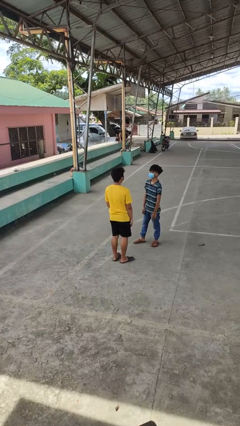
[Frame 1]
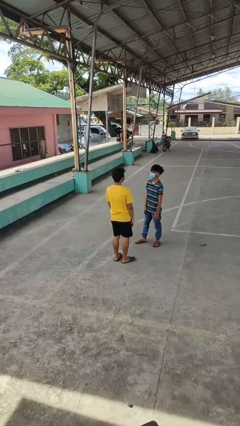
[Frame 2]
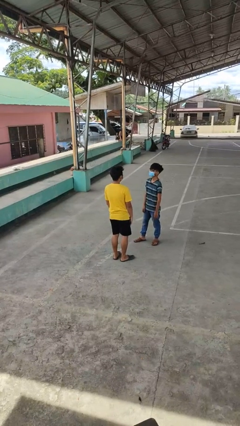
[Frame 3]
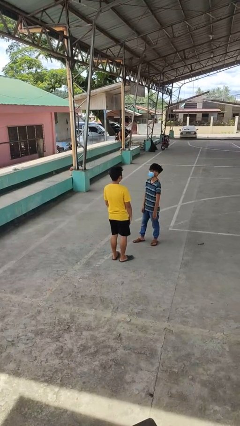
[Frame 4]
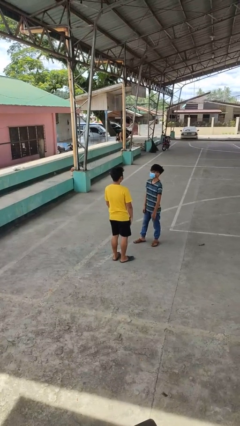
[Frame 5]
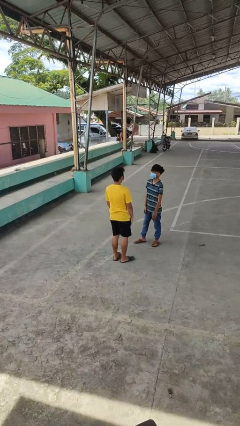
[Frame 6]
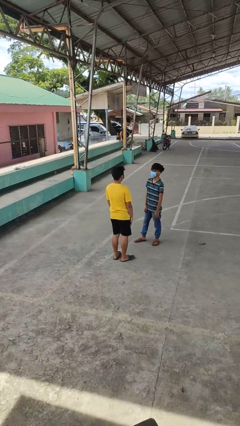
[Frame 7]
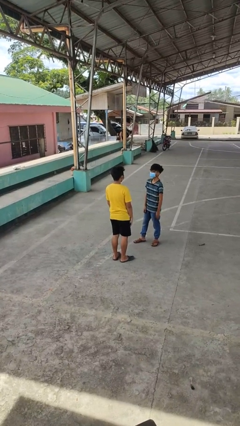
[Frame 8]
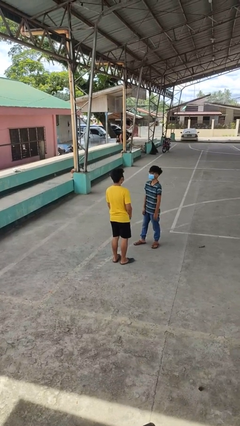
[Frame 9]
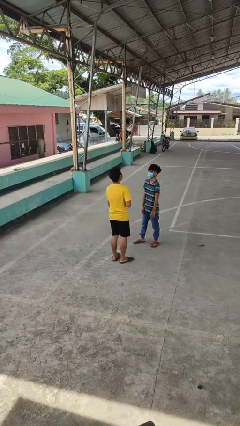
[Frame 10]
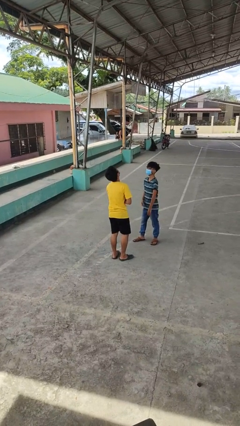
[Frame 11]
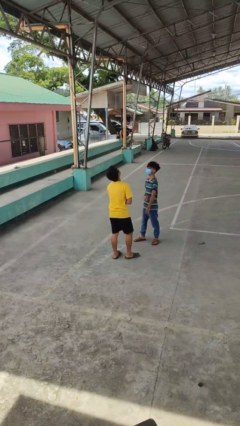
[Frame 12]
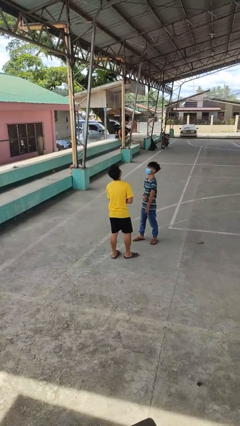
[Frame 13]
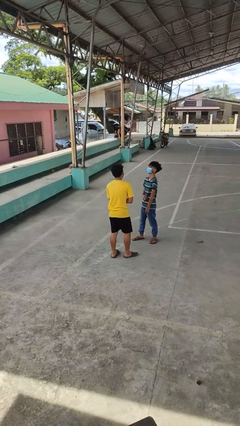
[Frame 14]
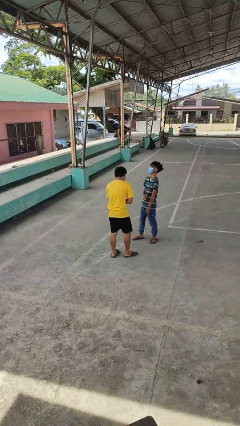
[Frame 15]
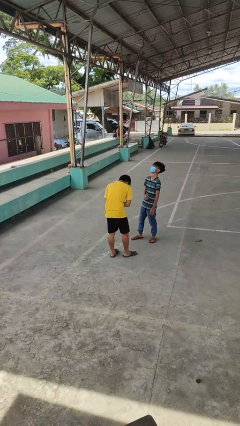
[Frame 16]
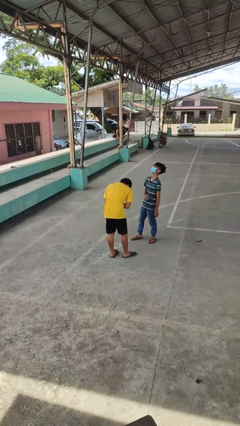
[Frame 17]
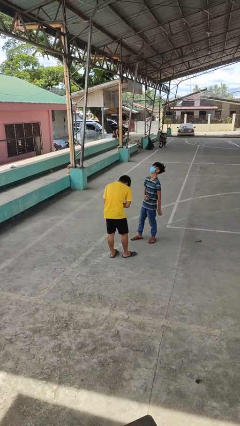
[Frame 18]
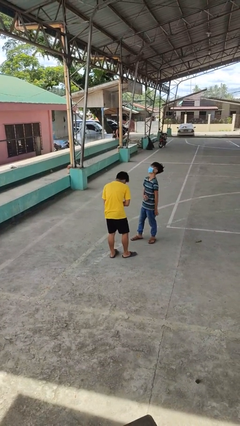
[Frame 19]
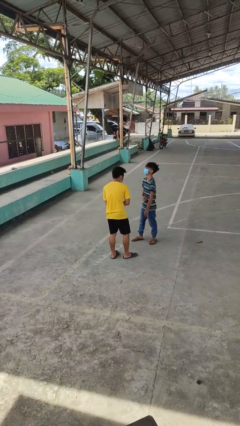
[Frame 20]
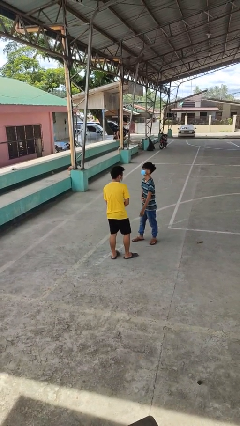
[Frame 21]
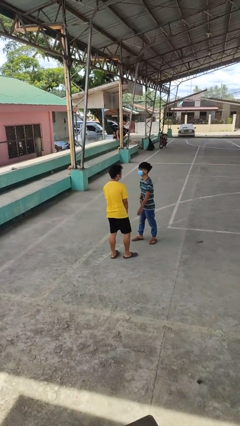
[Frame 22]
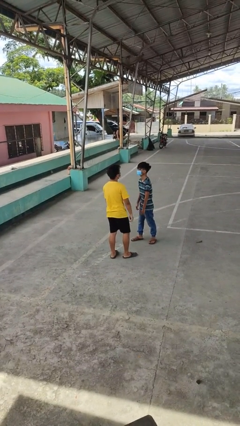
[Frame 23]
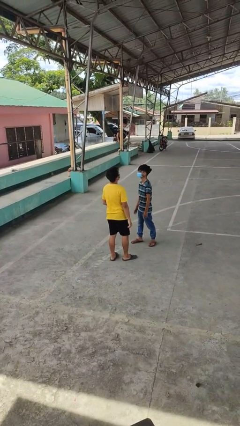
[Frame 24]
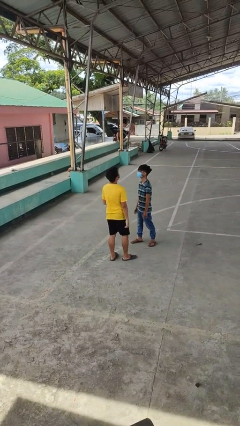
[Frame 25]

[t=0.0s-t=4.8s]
person laughs with person

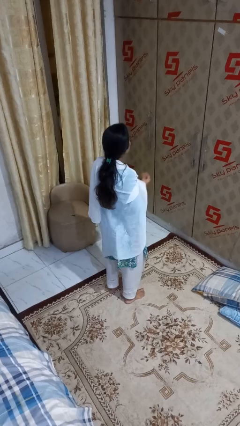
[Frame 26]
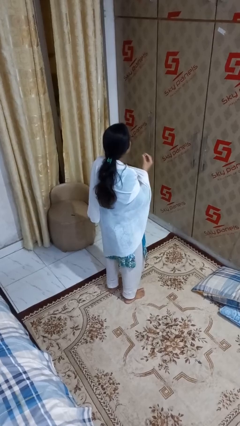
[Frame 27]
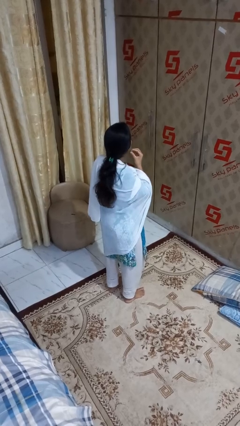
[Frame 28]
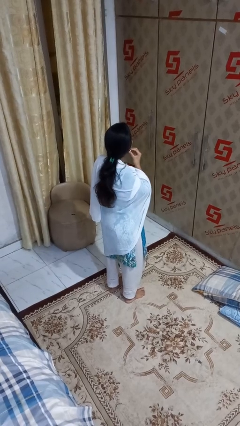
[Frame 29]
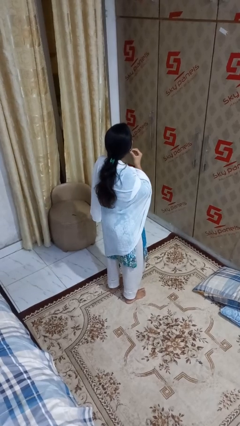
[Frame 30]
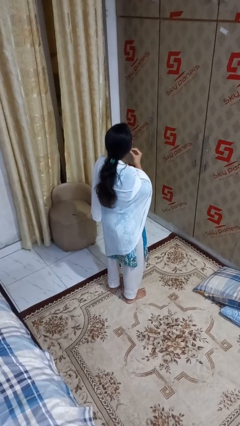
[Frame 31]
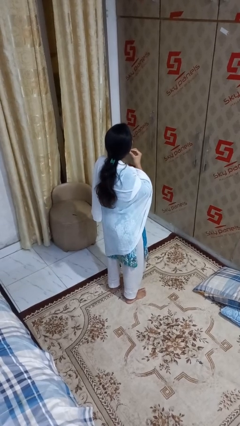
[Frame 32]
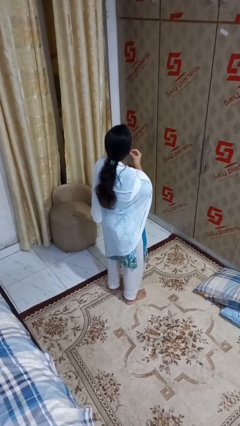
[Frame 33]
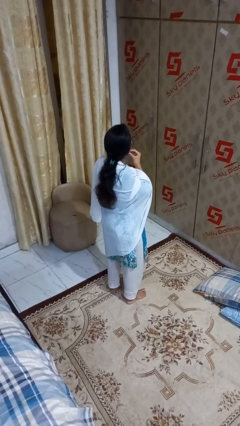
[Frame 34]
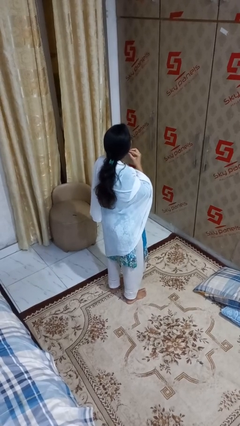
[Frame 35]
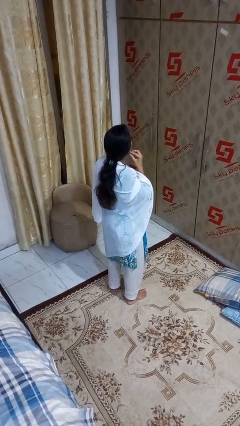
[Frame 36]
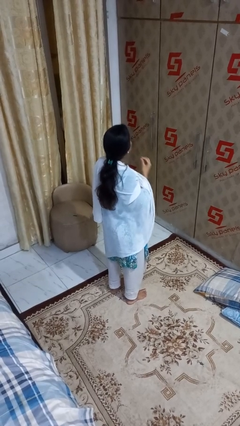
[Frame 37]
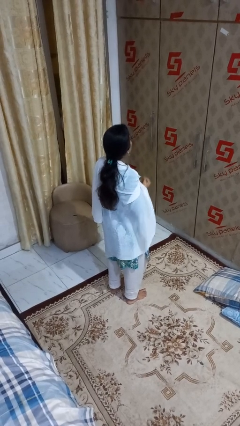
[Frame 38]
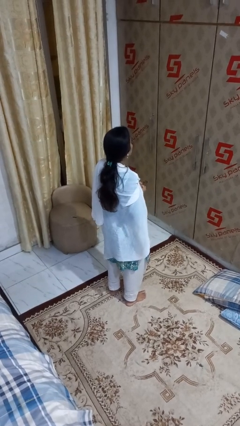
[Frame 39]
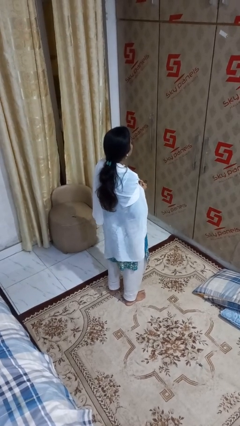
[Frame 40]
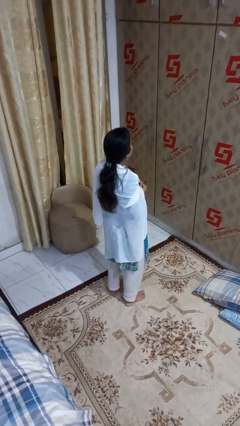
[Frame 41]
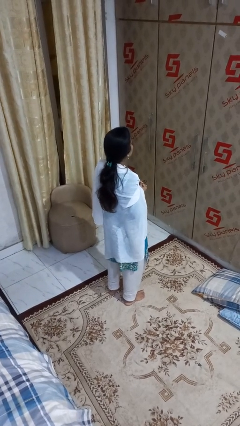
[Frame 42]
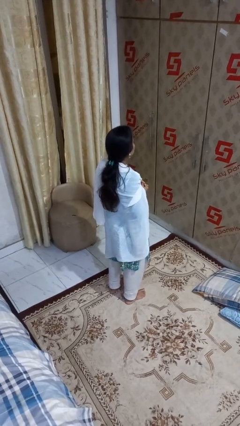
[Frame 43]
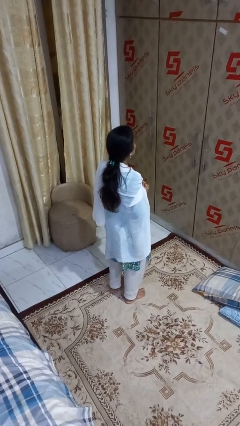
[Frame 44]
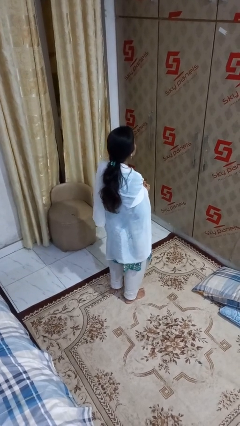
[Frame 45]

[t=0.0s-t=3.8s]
person puts on earrings

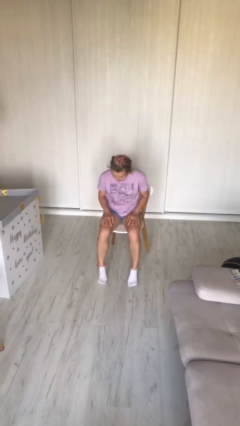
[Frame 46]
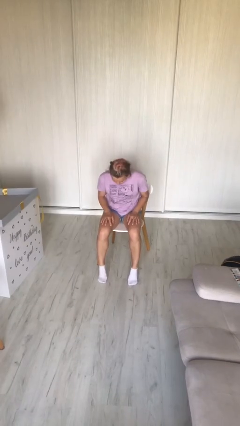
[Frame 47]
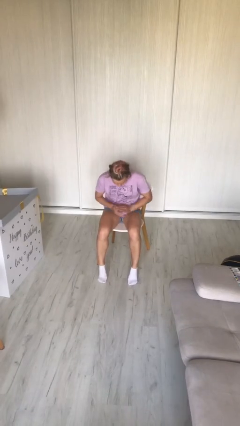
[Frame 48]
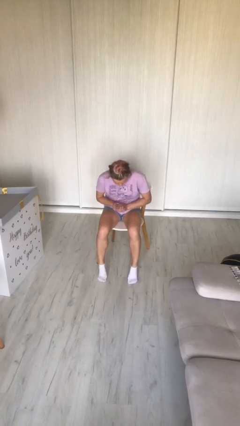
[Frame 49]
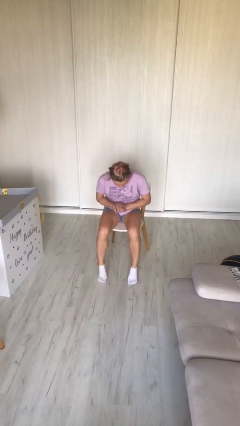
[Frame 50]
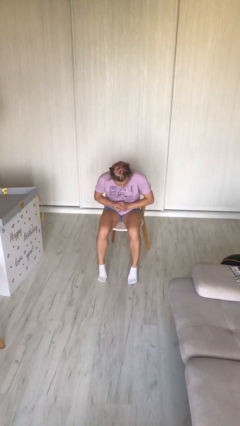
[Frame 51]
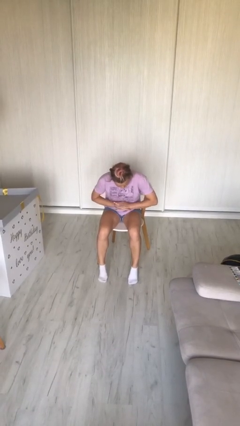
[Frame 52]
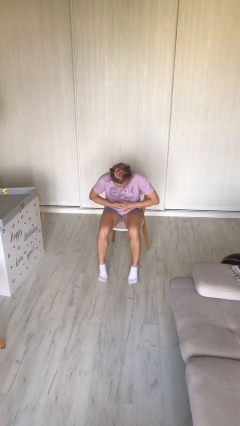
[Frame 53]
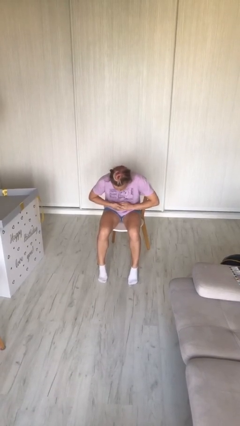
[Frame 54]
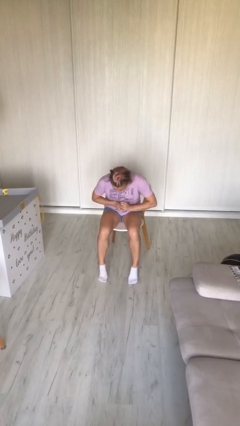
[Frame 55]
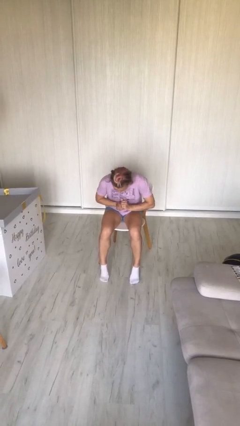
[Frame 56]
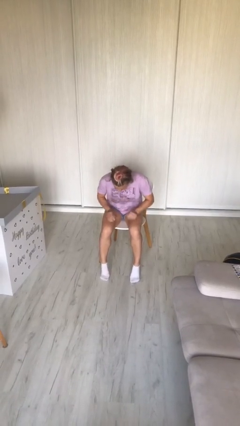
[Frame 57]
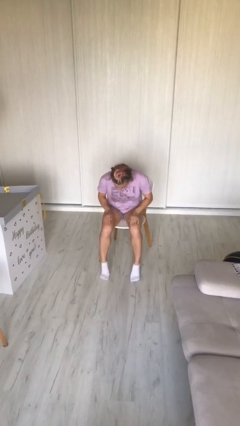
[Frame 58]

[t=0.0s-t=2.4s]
person looks at hands in lap

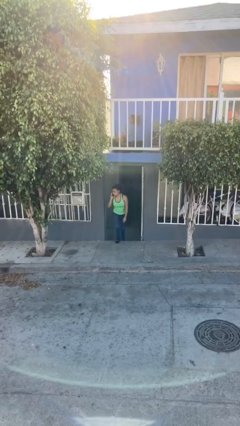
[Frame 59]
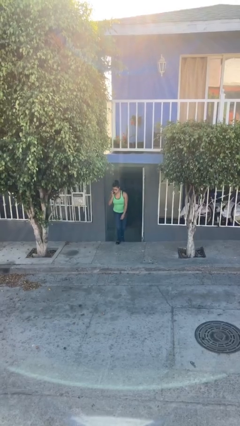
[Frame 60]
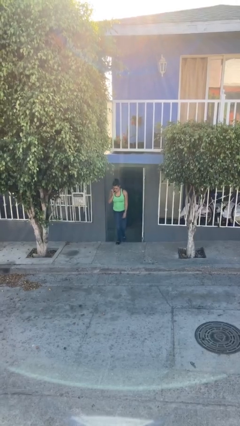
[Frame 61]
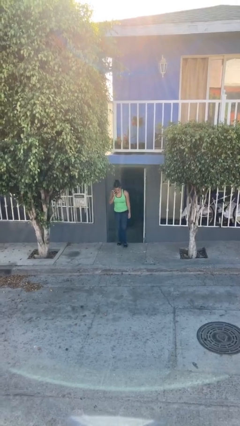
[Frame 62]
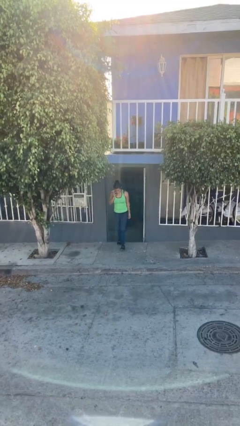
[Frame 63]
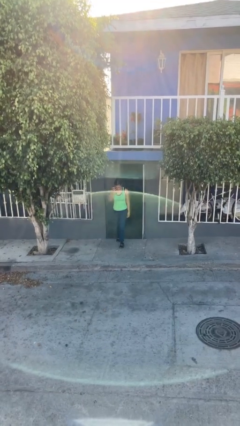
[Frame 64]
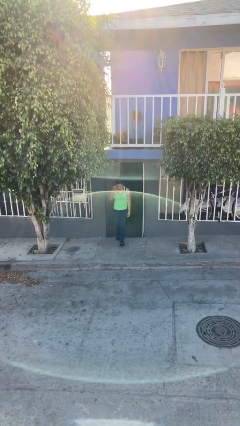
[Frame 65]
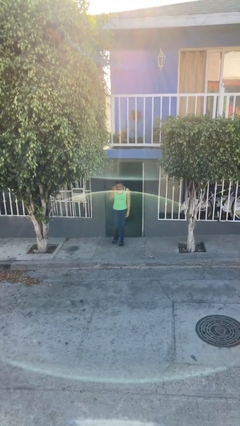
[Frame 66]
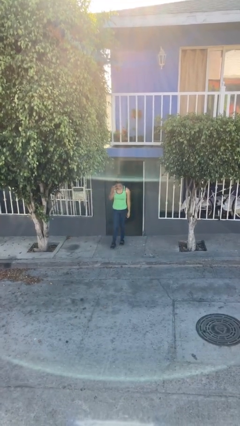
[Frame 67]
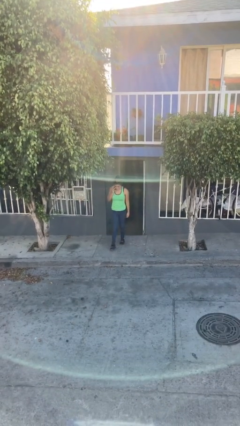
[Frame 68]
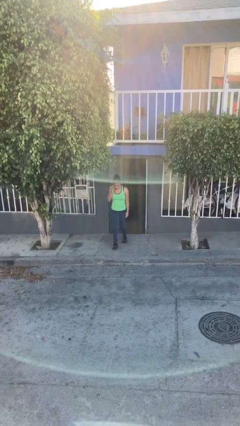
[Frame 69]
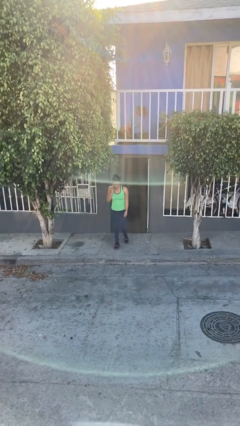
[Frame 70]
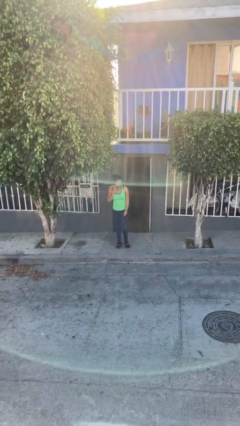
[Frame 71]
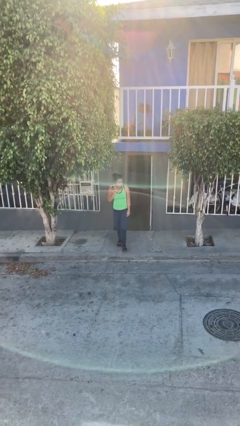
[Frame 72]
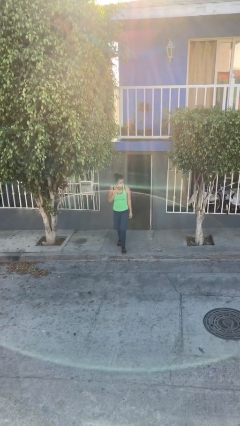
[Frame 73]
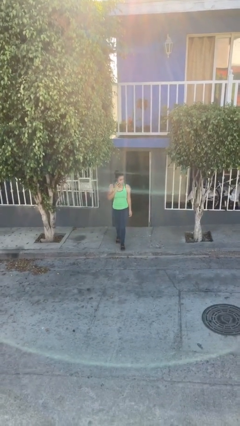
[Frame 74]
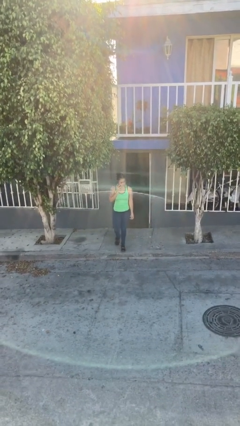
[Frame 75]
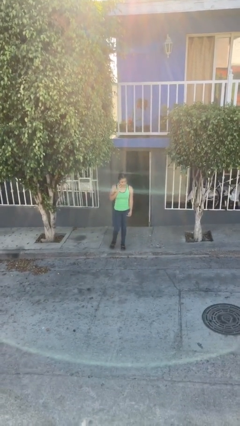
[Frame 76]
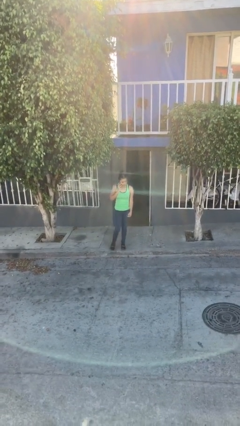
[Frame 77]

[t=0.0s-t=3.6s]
person enters scene through structure

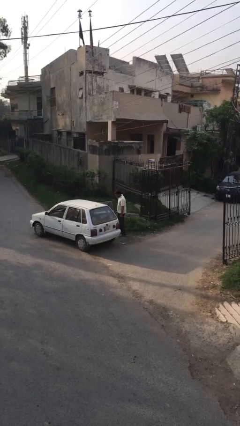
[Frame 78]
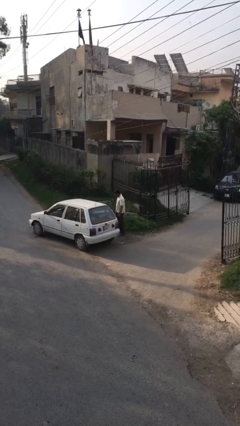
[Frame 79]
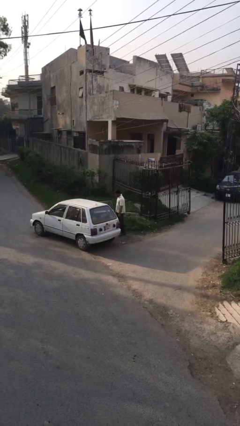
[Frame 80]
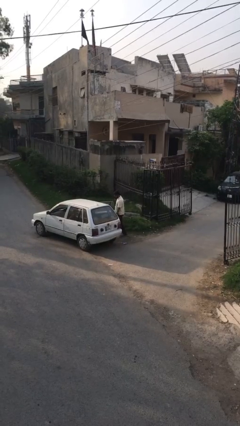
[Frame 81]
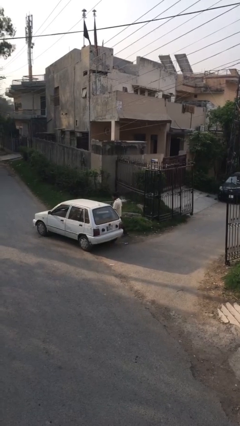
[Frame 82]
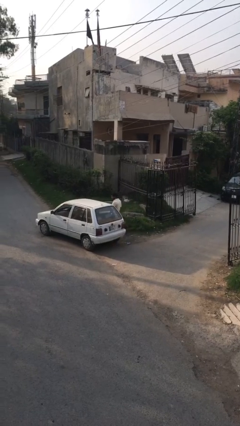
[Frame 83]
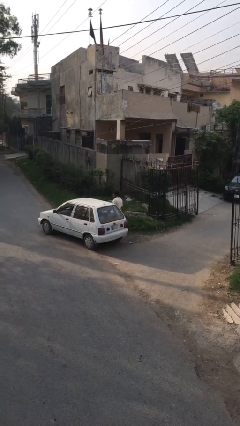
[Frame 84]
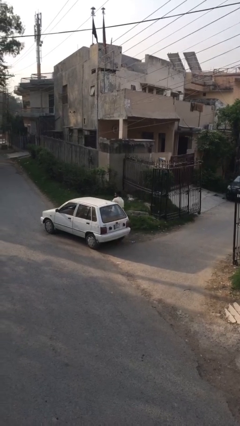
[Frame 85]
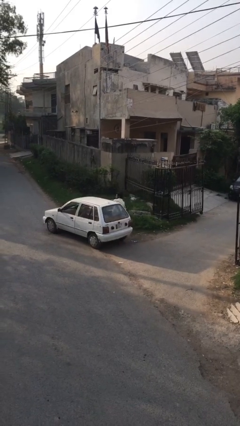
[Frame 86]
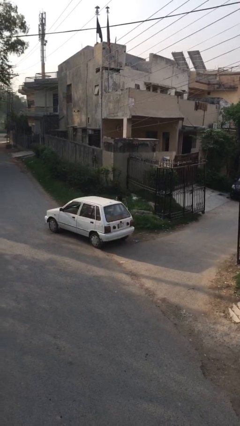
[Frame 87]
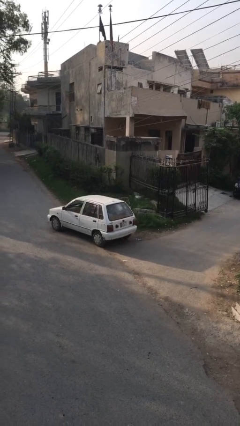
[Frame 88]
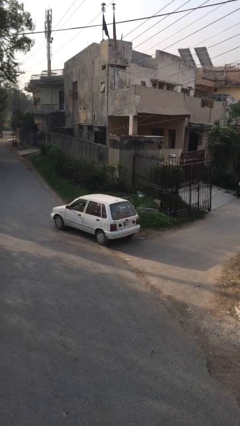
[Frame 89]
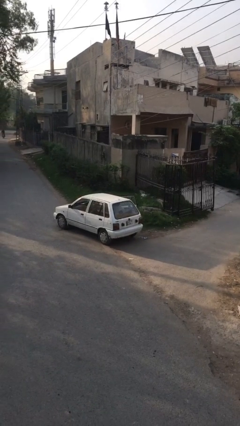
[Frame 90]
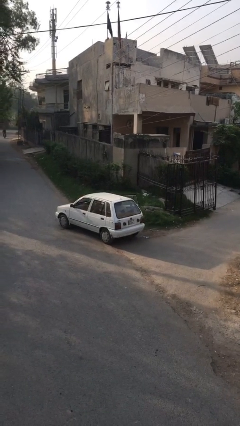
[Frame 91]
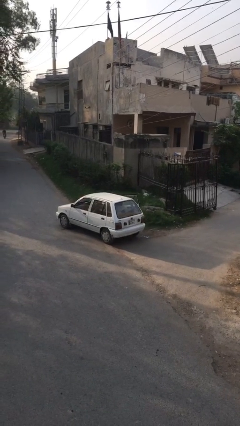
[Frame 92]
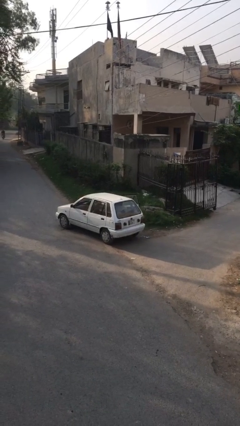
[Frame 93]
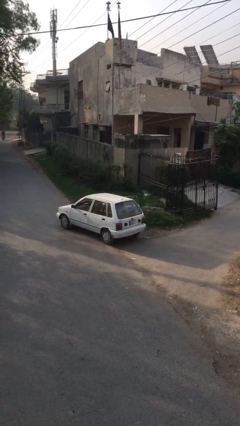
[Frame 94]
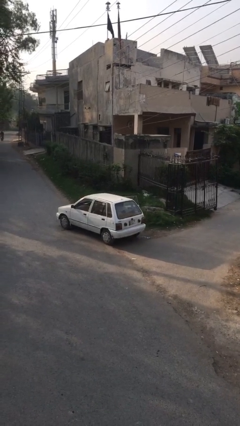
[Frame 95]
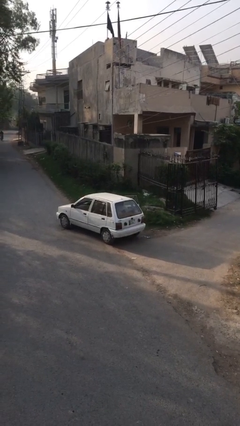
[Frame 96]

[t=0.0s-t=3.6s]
person enters car
